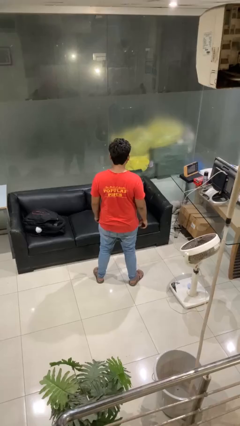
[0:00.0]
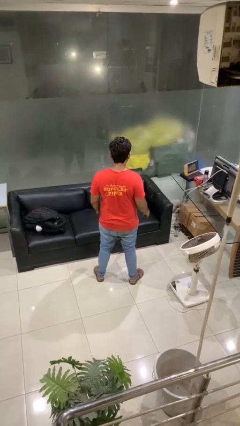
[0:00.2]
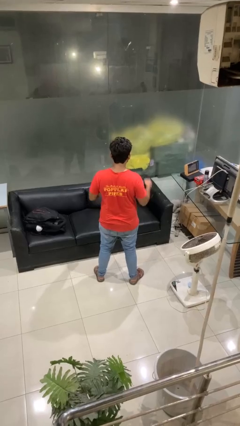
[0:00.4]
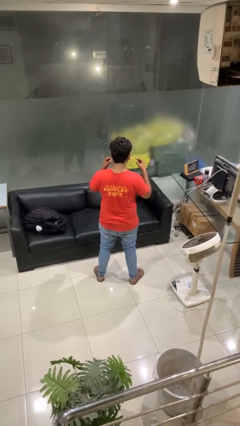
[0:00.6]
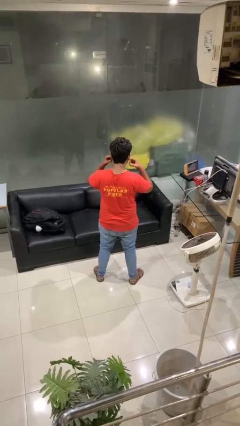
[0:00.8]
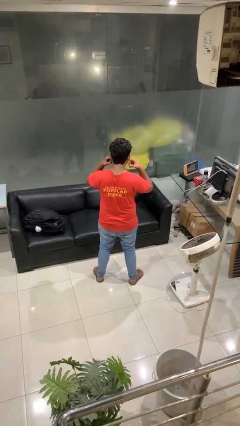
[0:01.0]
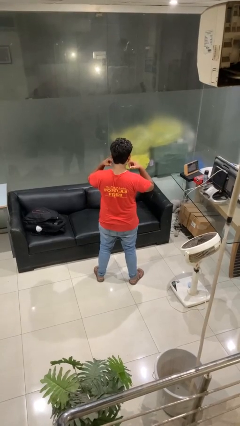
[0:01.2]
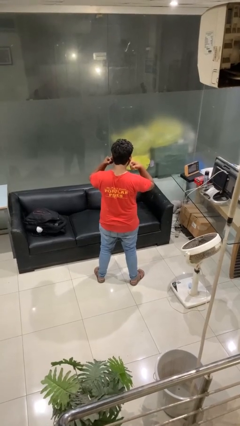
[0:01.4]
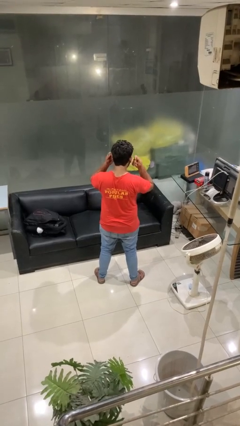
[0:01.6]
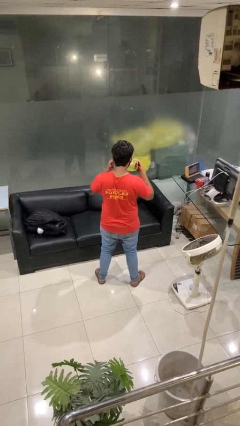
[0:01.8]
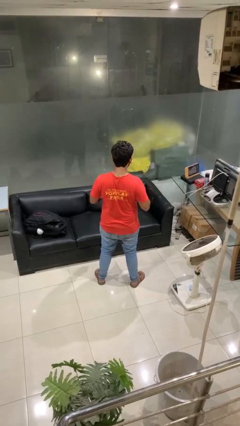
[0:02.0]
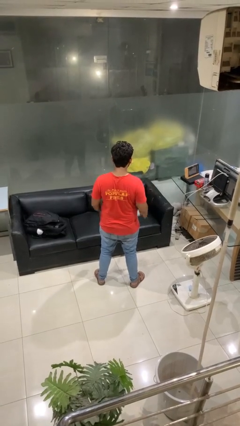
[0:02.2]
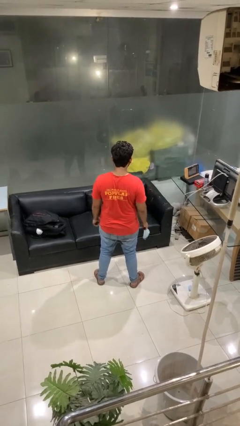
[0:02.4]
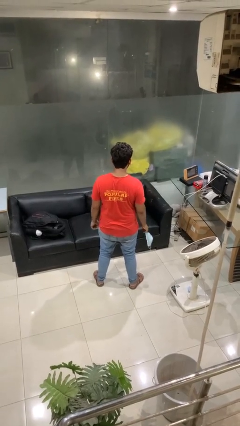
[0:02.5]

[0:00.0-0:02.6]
person takes off facemask

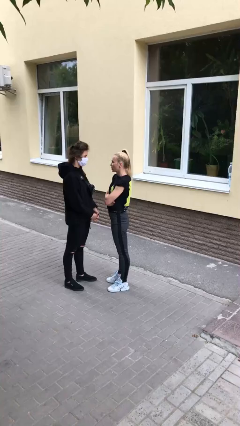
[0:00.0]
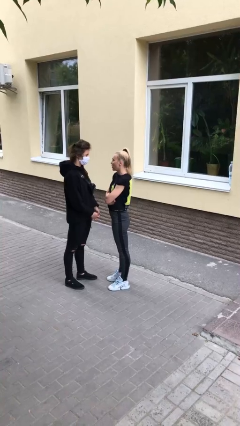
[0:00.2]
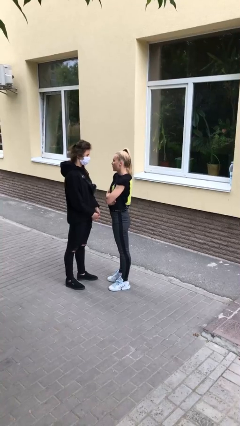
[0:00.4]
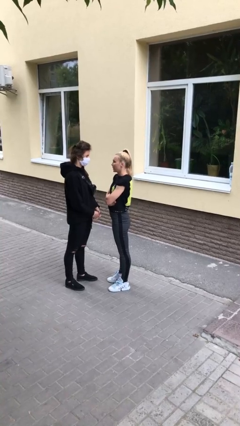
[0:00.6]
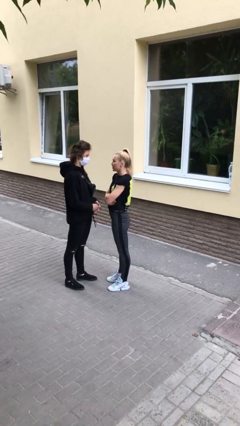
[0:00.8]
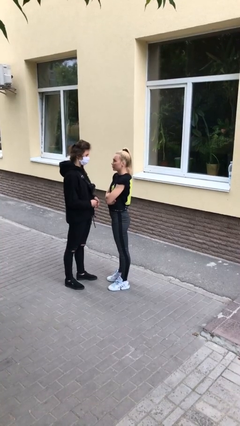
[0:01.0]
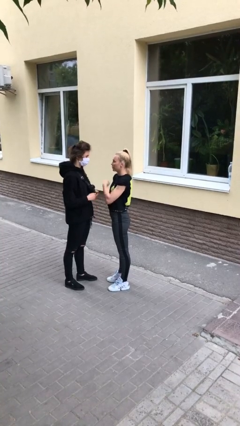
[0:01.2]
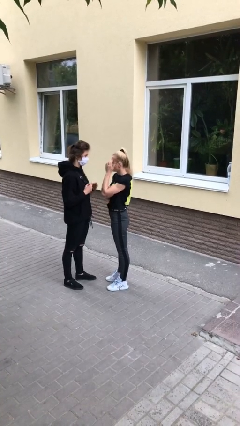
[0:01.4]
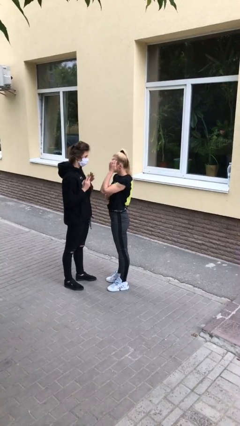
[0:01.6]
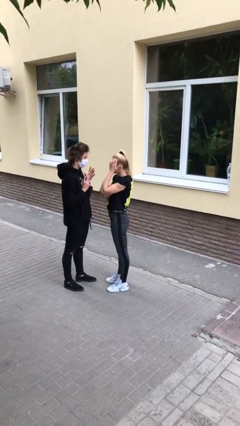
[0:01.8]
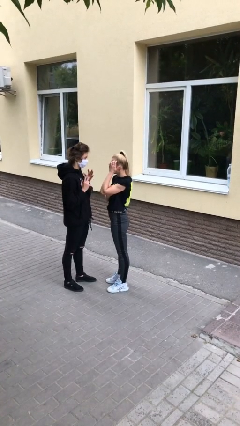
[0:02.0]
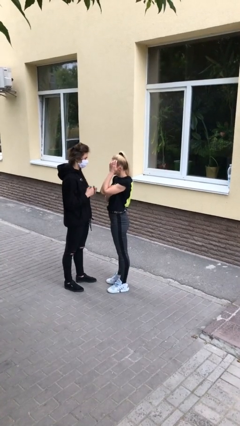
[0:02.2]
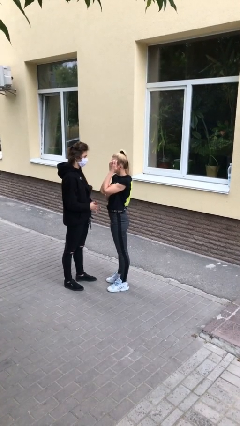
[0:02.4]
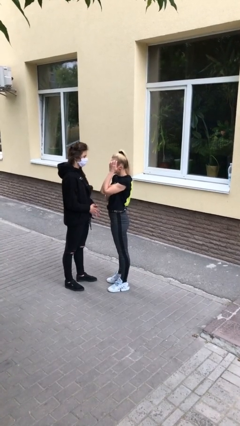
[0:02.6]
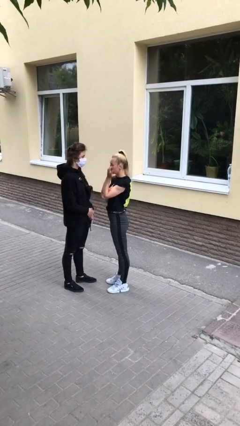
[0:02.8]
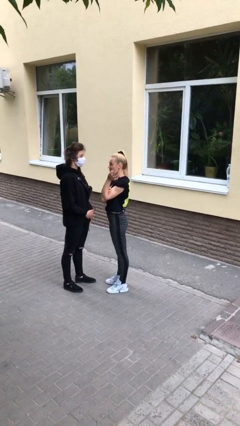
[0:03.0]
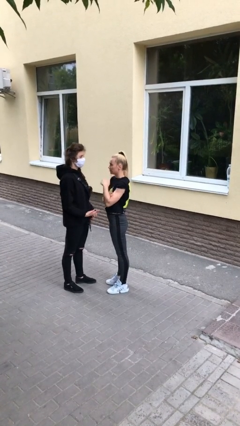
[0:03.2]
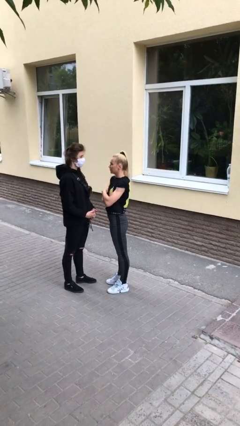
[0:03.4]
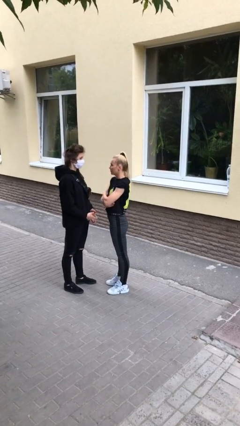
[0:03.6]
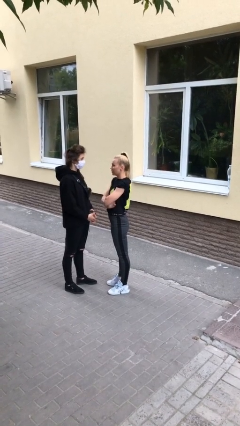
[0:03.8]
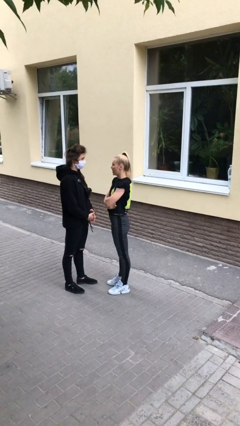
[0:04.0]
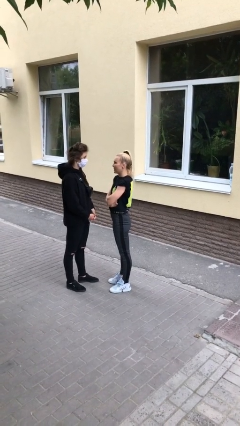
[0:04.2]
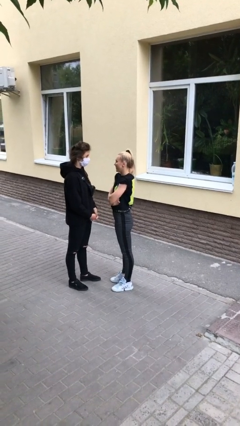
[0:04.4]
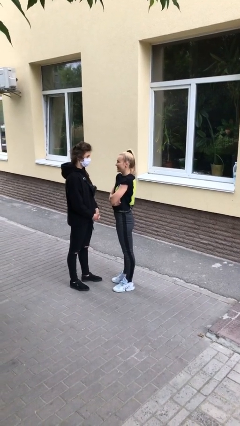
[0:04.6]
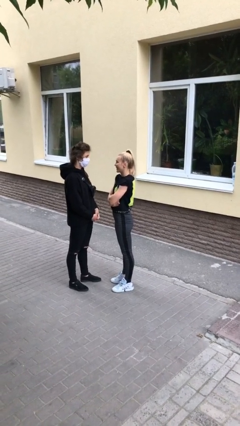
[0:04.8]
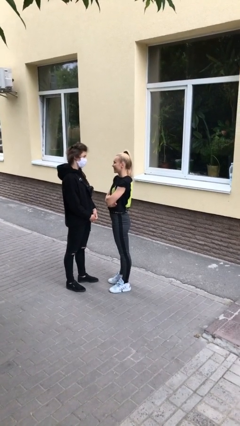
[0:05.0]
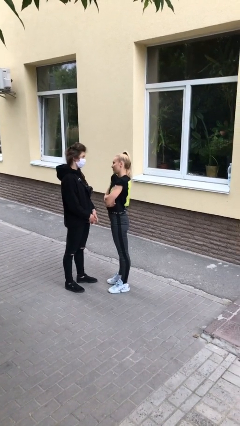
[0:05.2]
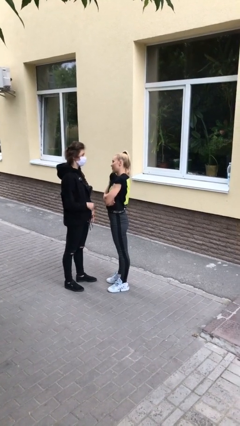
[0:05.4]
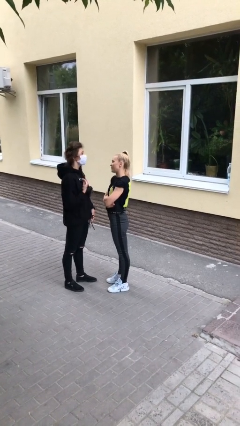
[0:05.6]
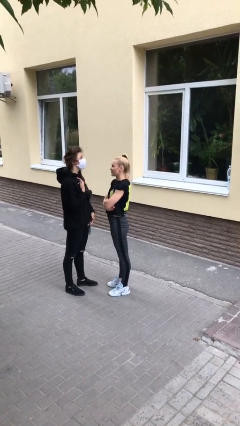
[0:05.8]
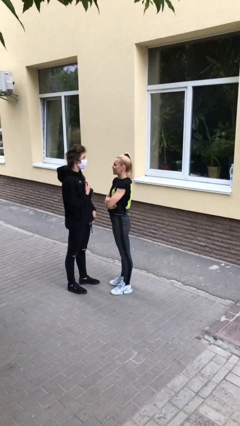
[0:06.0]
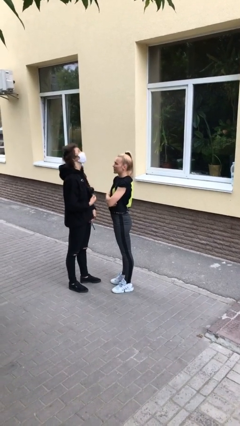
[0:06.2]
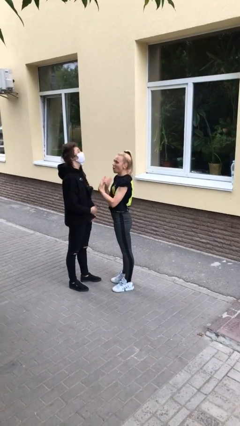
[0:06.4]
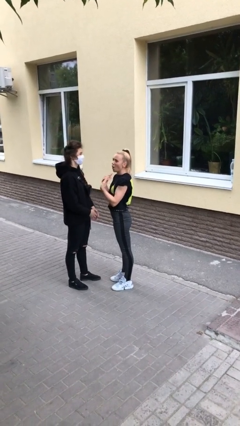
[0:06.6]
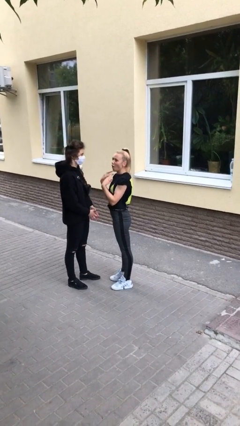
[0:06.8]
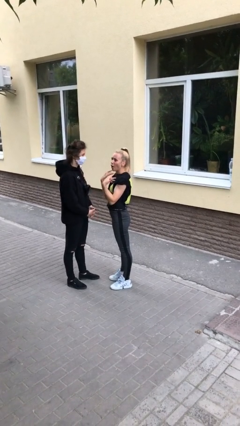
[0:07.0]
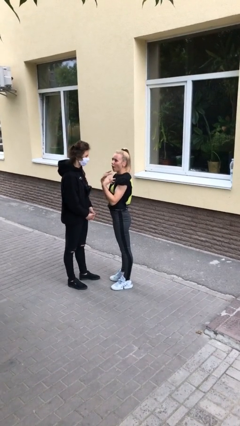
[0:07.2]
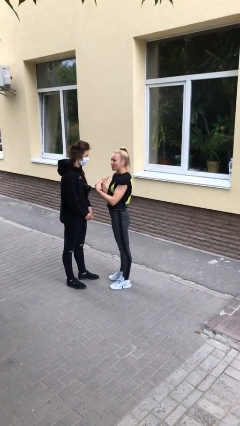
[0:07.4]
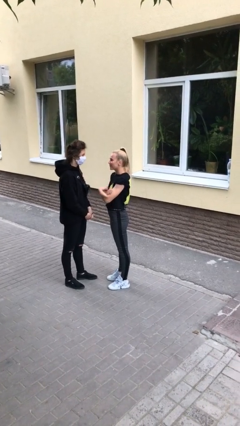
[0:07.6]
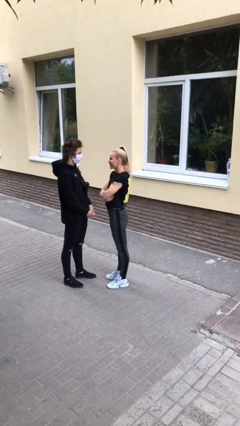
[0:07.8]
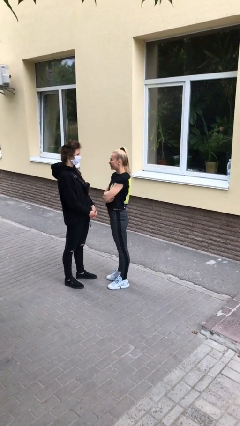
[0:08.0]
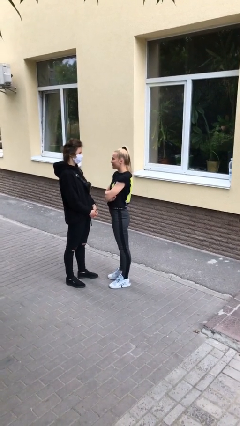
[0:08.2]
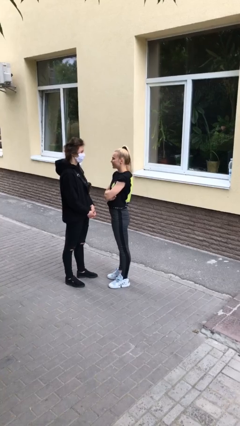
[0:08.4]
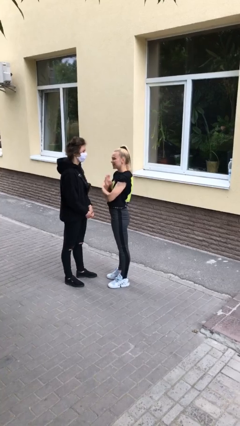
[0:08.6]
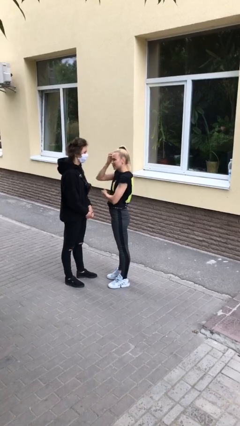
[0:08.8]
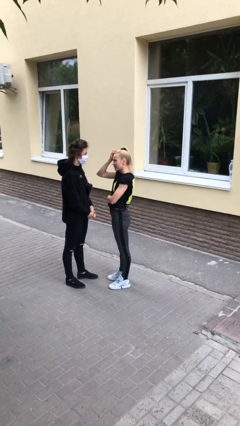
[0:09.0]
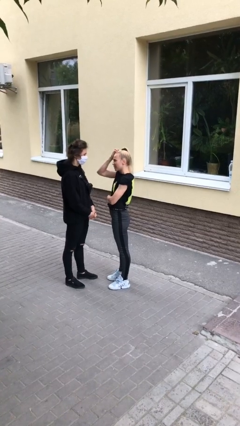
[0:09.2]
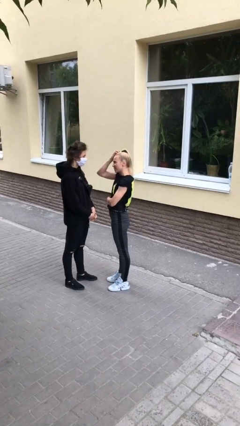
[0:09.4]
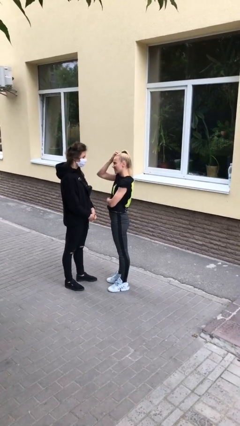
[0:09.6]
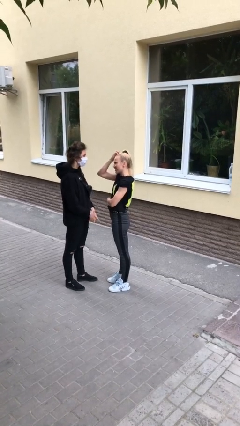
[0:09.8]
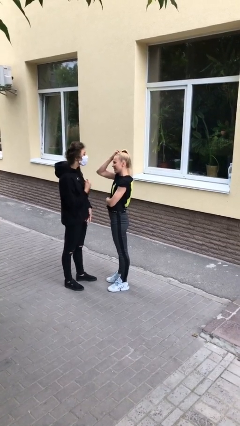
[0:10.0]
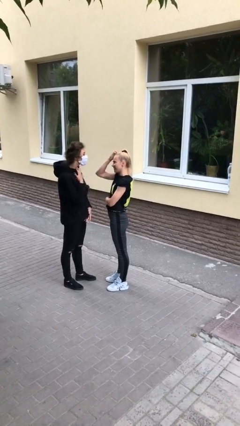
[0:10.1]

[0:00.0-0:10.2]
person talks to person

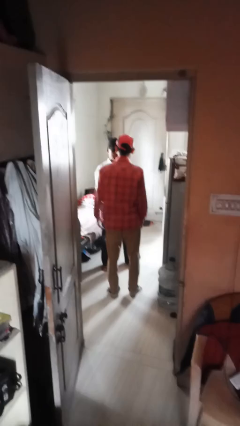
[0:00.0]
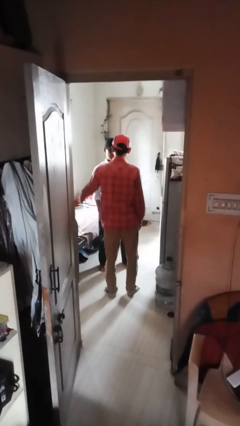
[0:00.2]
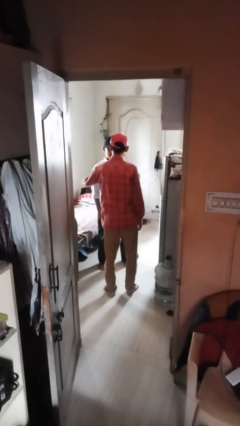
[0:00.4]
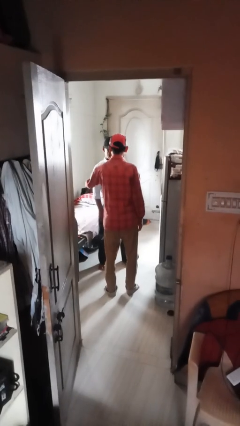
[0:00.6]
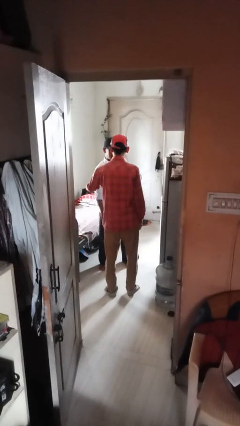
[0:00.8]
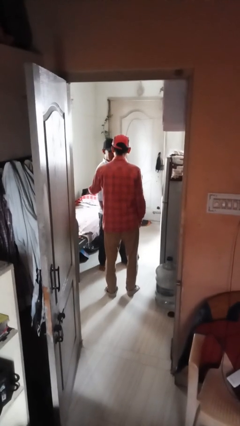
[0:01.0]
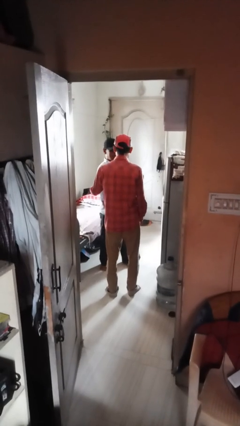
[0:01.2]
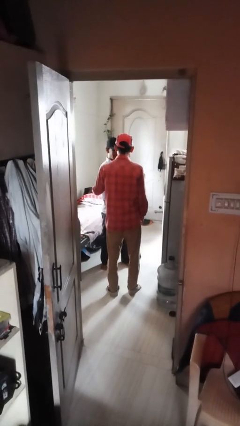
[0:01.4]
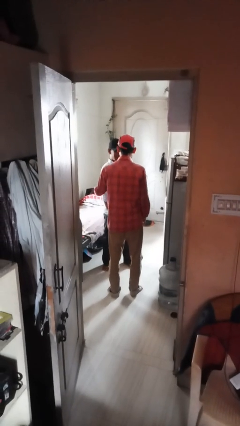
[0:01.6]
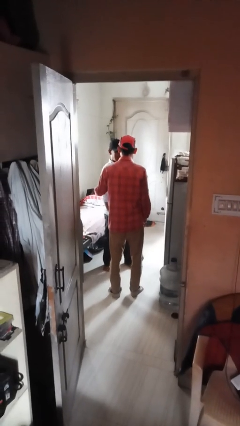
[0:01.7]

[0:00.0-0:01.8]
person grabs person by shoulder

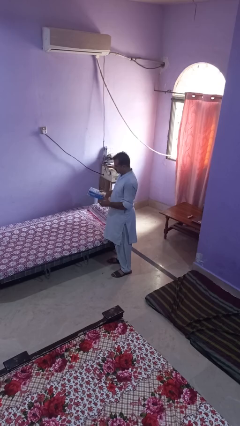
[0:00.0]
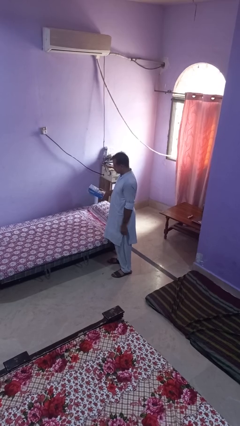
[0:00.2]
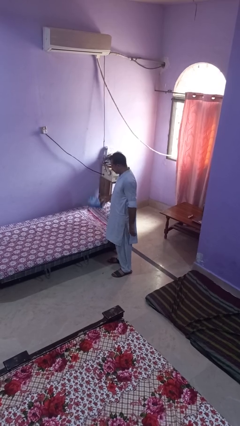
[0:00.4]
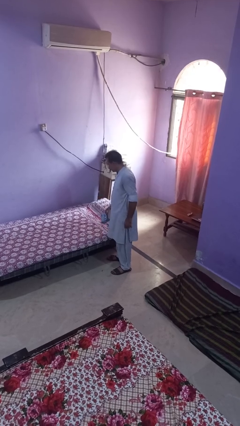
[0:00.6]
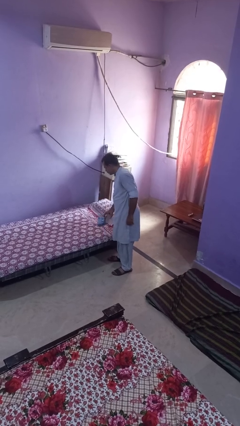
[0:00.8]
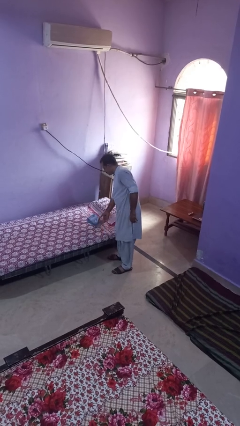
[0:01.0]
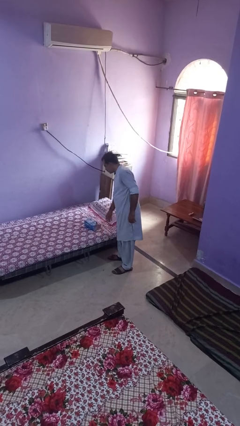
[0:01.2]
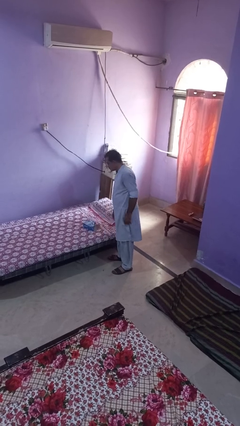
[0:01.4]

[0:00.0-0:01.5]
person puts down object on bed

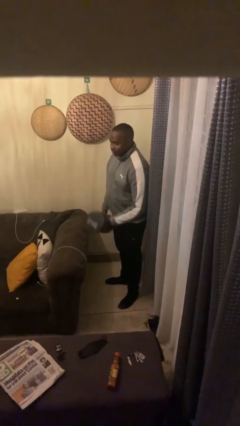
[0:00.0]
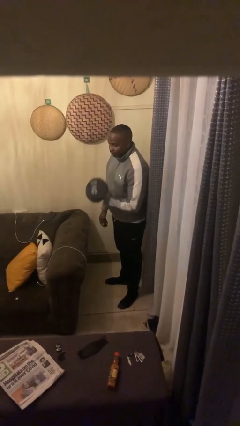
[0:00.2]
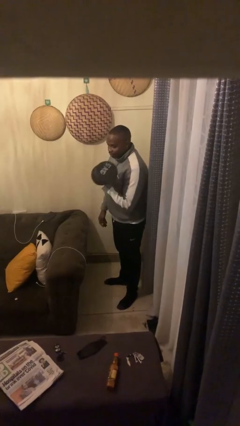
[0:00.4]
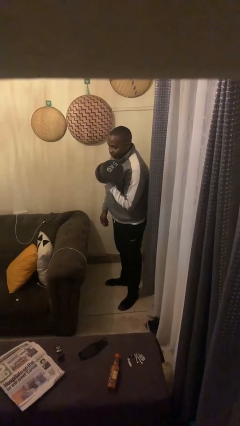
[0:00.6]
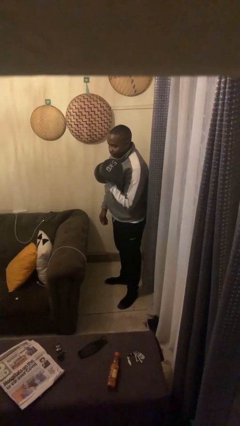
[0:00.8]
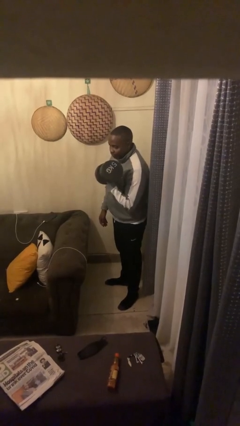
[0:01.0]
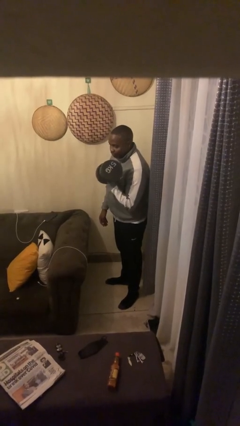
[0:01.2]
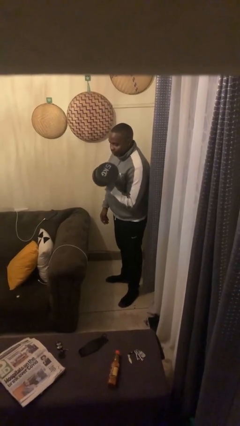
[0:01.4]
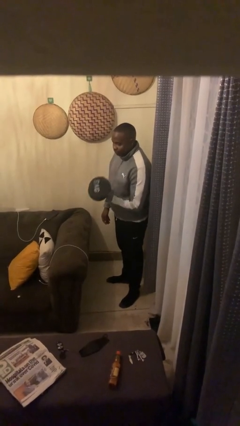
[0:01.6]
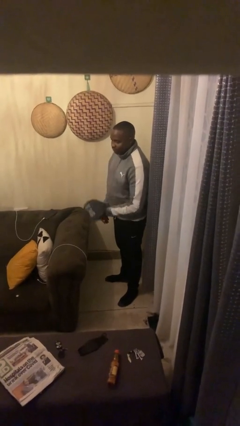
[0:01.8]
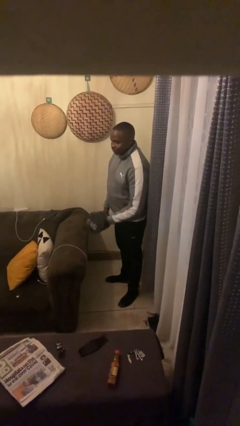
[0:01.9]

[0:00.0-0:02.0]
person lifts dumbbells
